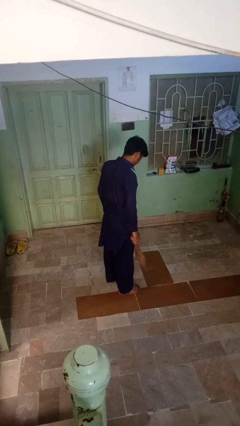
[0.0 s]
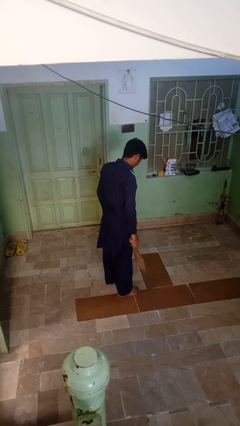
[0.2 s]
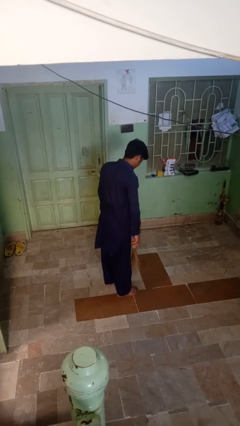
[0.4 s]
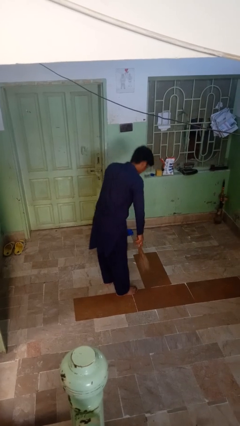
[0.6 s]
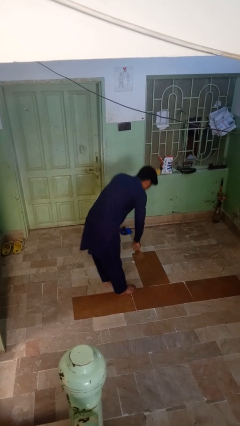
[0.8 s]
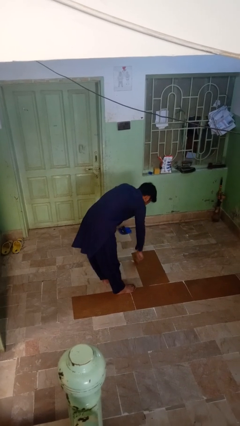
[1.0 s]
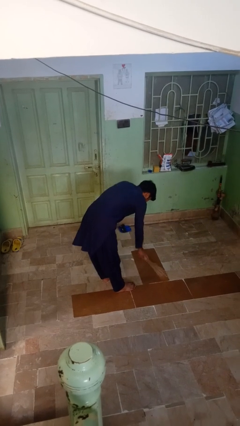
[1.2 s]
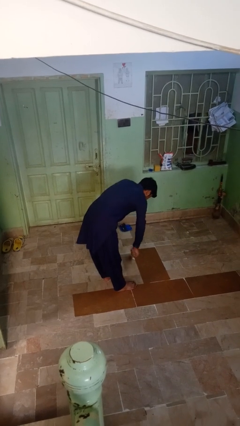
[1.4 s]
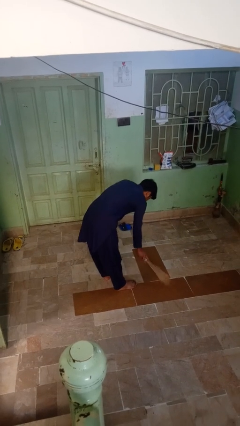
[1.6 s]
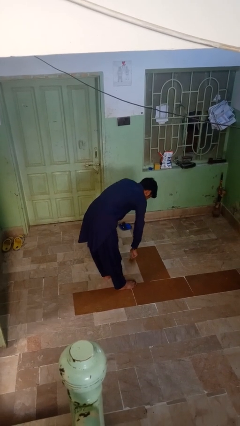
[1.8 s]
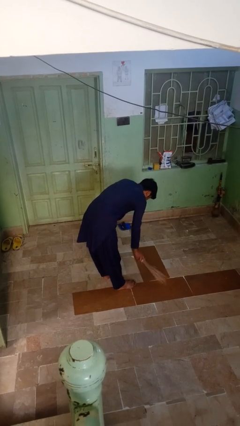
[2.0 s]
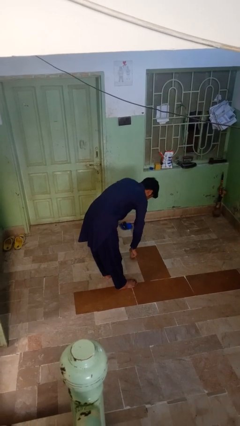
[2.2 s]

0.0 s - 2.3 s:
person sweeps floor

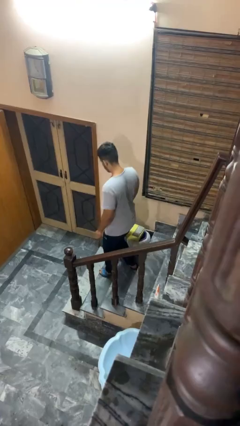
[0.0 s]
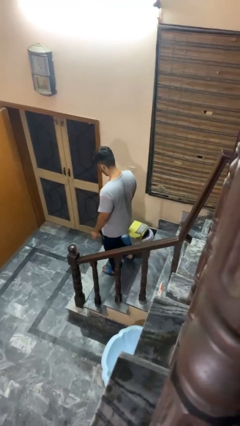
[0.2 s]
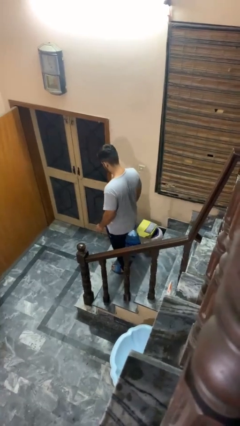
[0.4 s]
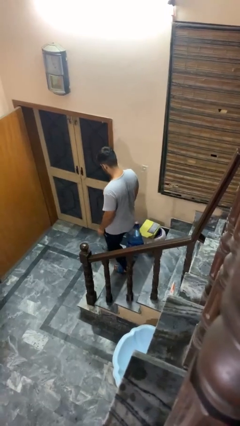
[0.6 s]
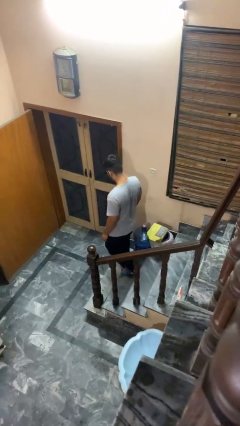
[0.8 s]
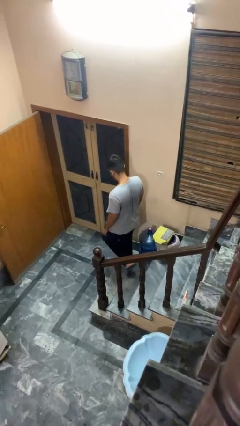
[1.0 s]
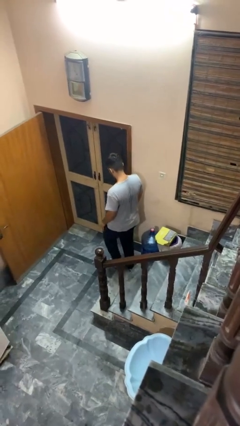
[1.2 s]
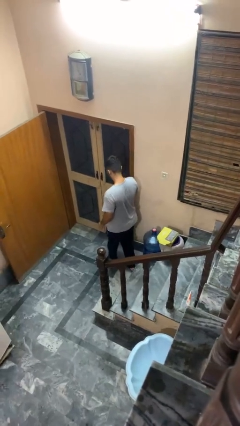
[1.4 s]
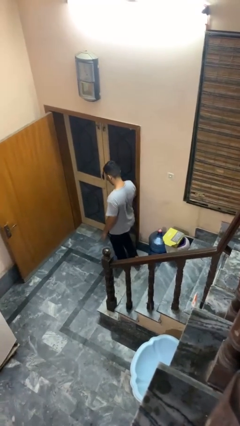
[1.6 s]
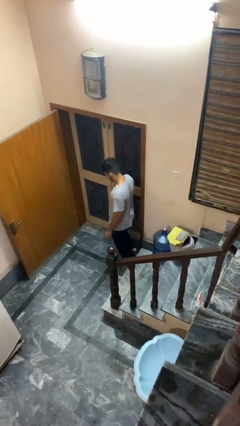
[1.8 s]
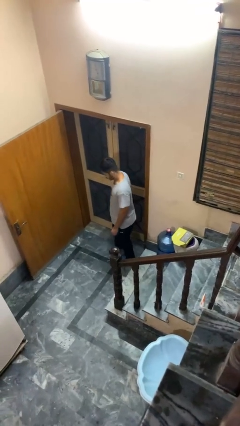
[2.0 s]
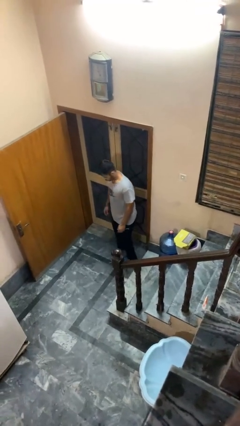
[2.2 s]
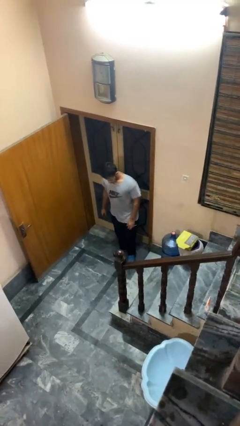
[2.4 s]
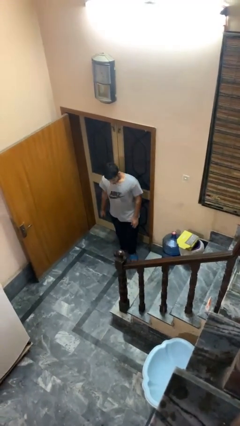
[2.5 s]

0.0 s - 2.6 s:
person climbs down stairs

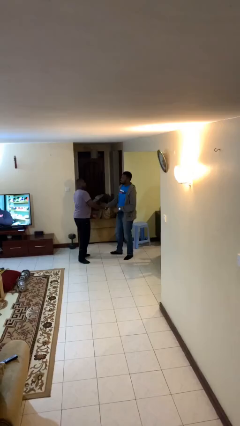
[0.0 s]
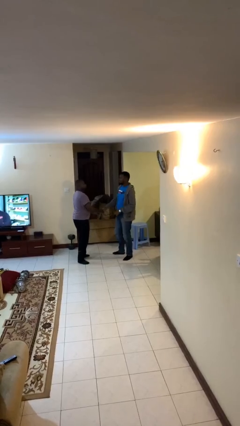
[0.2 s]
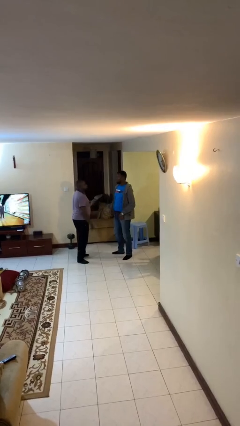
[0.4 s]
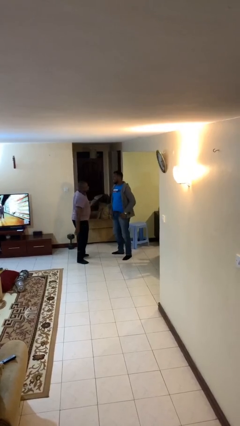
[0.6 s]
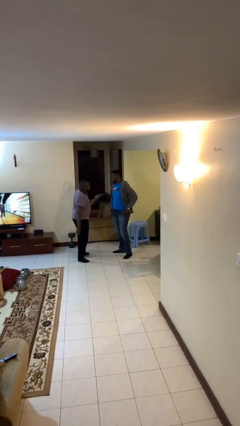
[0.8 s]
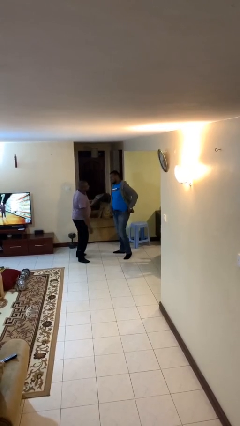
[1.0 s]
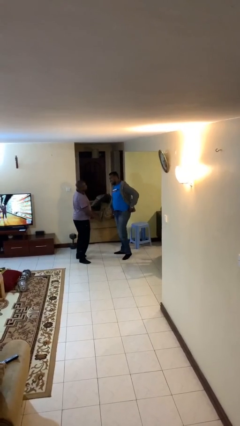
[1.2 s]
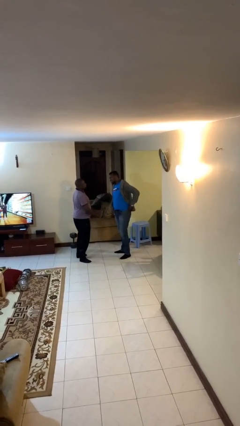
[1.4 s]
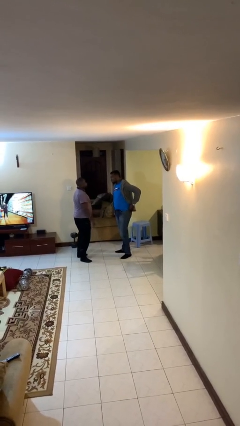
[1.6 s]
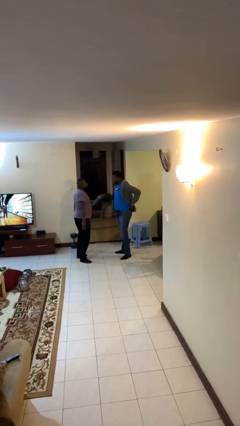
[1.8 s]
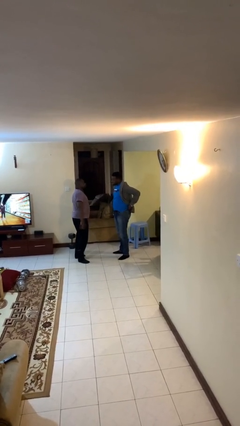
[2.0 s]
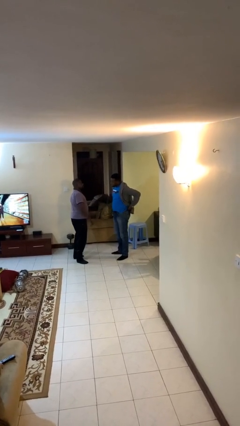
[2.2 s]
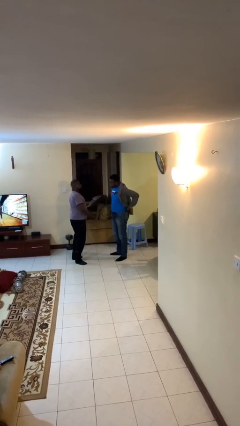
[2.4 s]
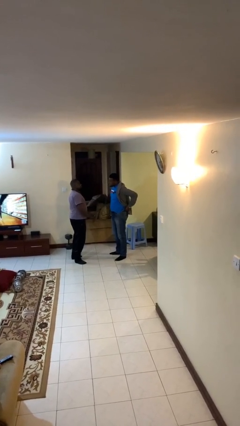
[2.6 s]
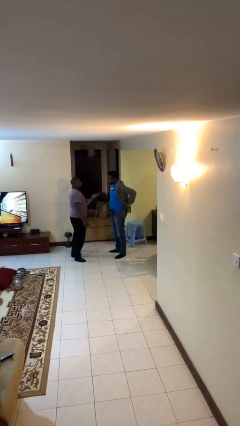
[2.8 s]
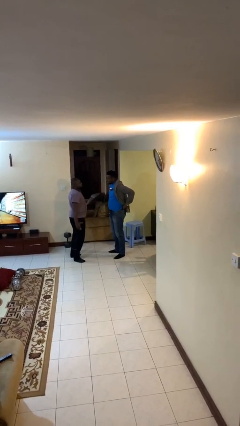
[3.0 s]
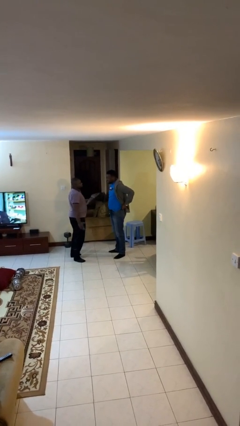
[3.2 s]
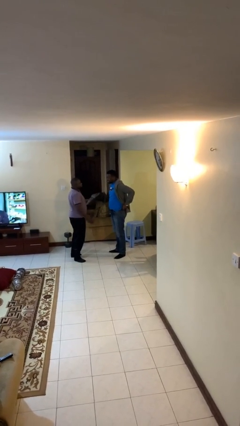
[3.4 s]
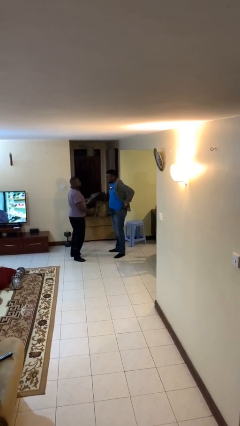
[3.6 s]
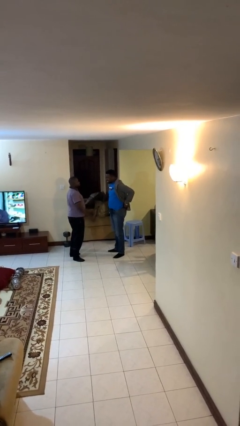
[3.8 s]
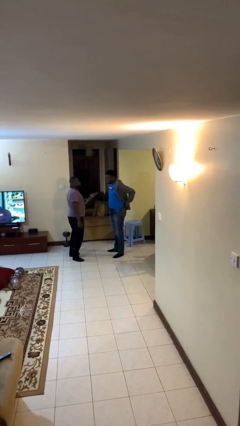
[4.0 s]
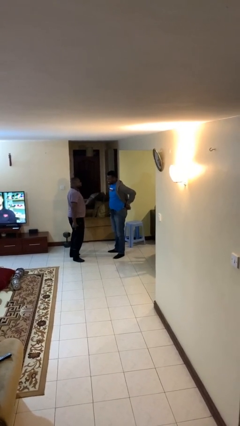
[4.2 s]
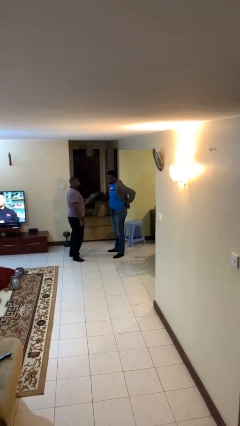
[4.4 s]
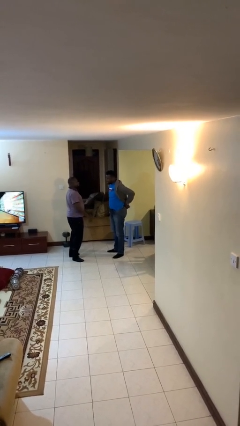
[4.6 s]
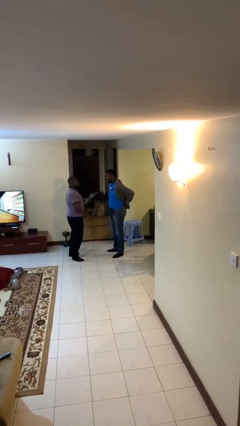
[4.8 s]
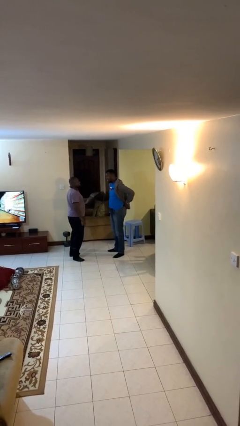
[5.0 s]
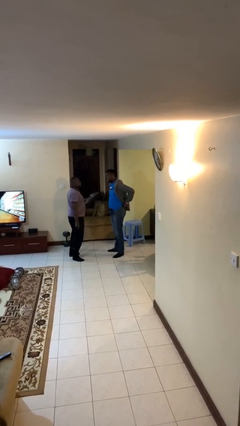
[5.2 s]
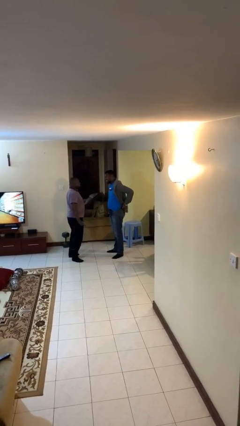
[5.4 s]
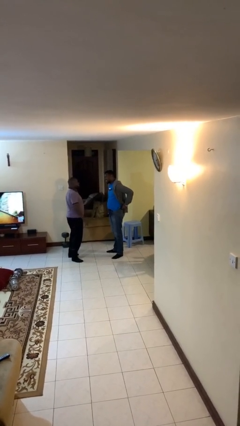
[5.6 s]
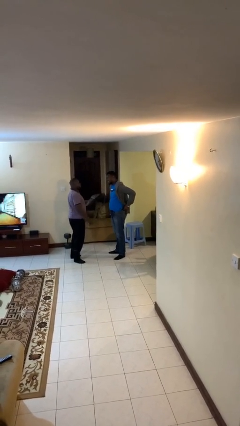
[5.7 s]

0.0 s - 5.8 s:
person talks to person

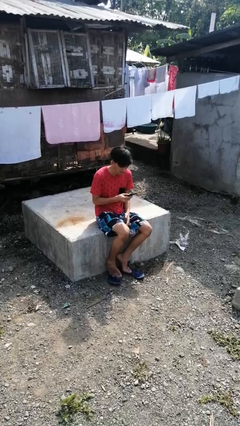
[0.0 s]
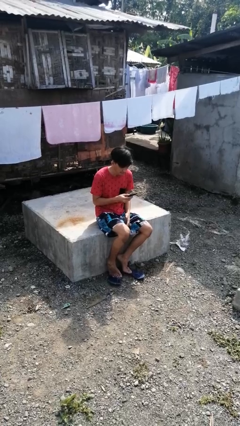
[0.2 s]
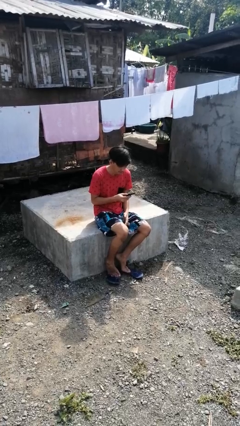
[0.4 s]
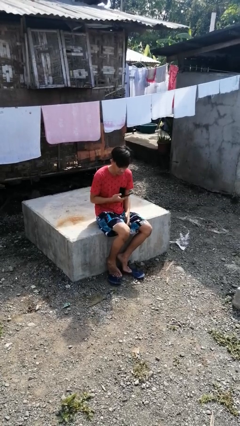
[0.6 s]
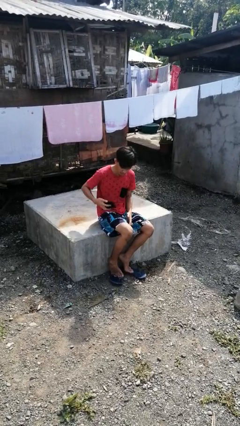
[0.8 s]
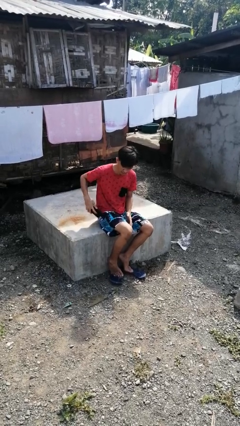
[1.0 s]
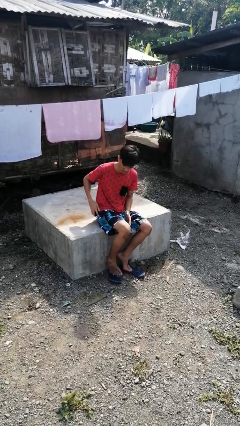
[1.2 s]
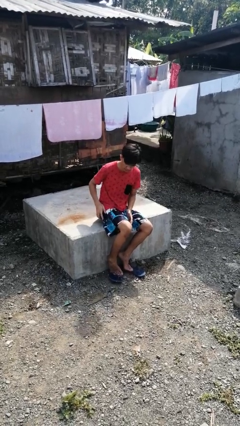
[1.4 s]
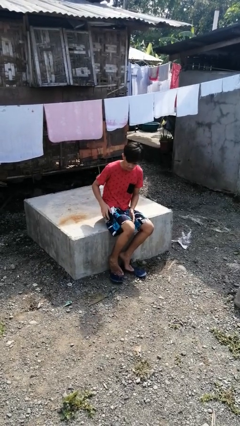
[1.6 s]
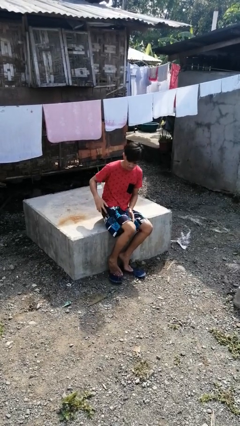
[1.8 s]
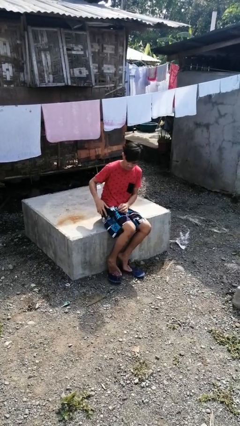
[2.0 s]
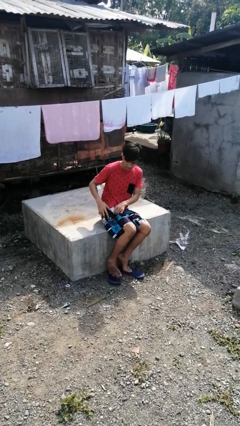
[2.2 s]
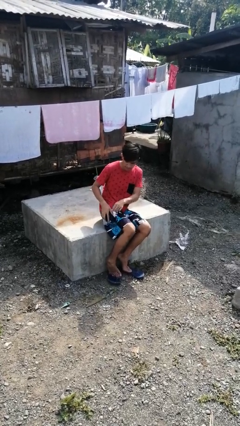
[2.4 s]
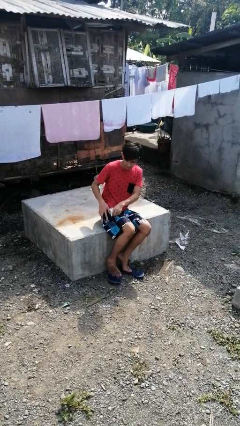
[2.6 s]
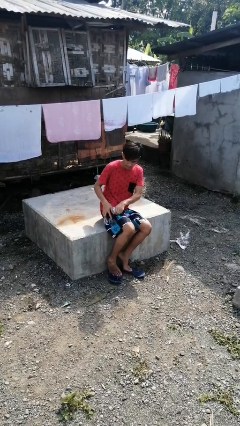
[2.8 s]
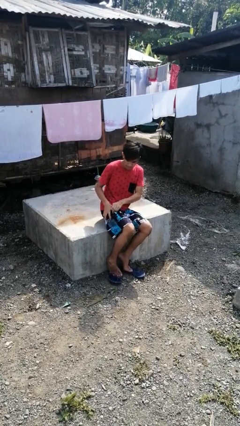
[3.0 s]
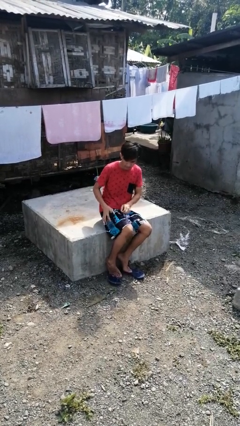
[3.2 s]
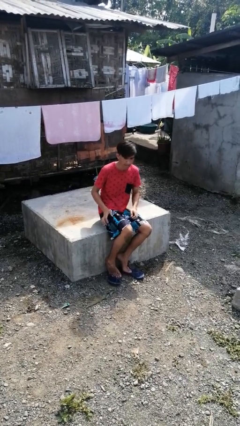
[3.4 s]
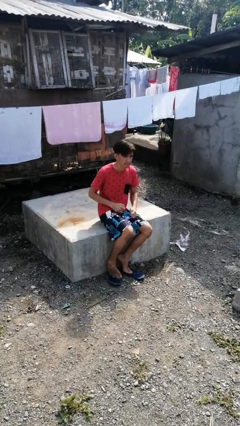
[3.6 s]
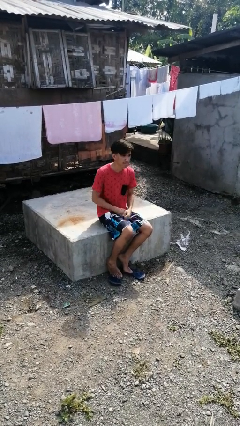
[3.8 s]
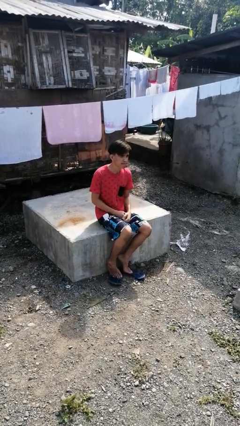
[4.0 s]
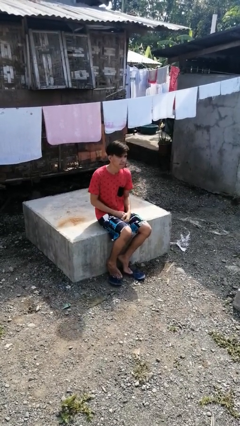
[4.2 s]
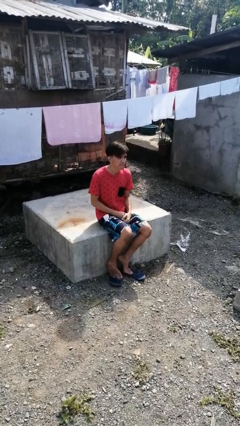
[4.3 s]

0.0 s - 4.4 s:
person puts phone into pocket

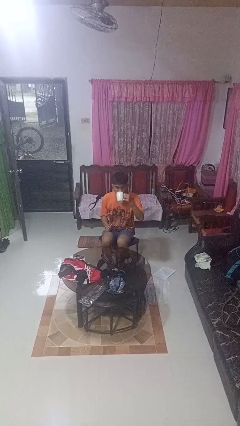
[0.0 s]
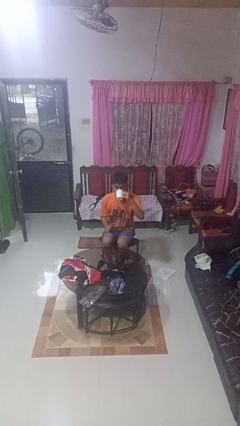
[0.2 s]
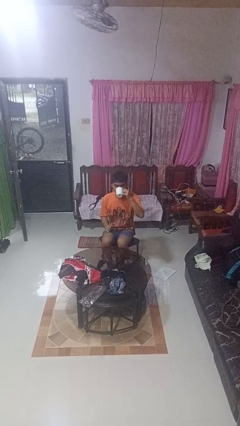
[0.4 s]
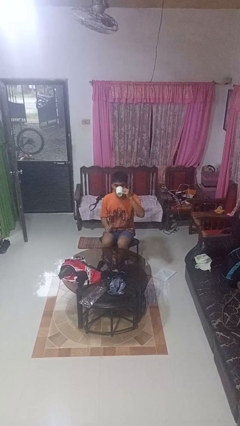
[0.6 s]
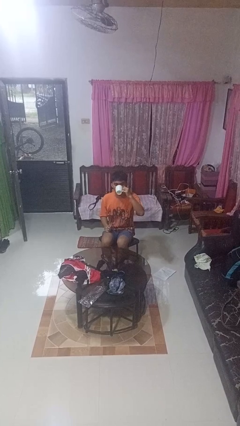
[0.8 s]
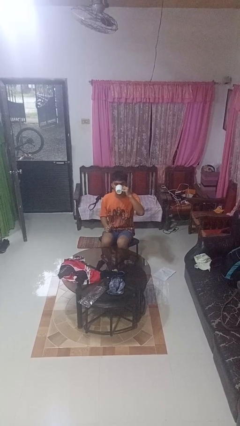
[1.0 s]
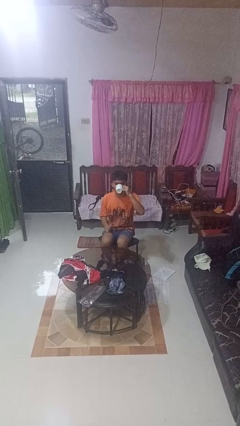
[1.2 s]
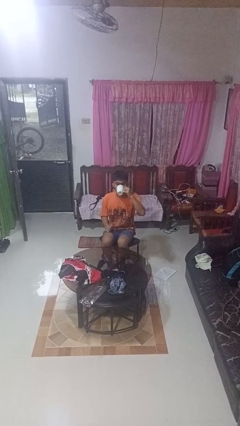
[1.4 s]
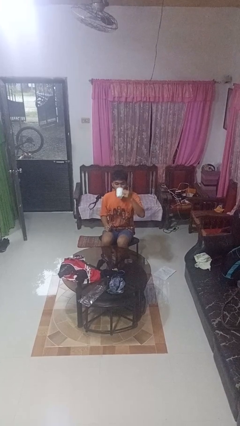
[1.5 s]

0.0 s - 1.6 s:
person drinks from mug

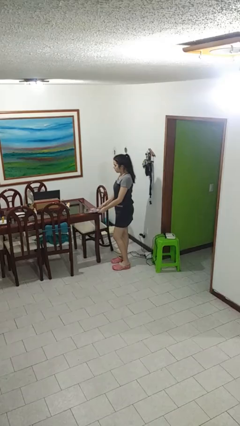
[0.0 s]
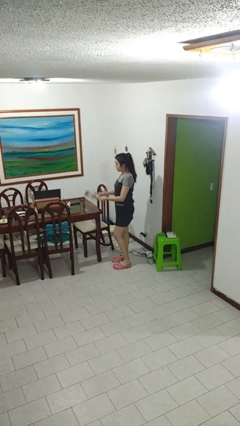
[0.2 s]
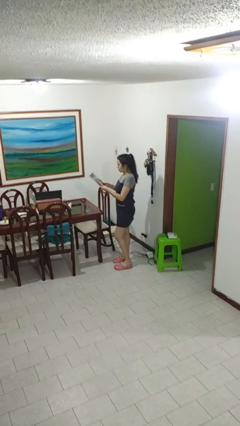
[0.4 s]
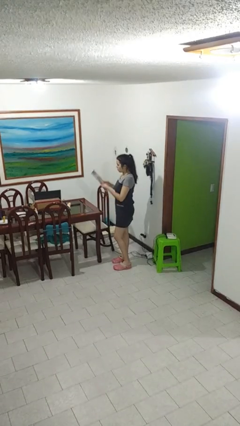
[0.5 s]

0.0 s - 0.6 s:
person picks up object from table

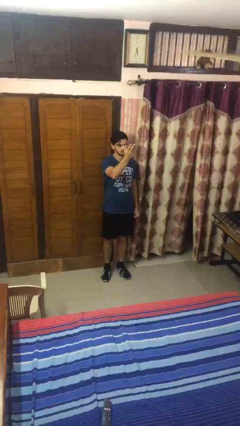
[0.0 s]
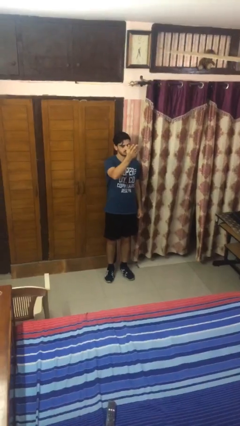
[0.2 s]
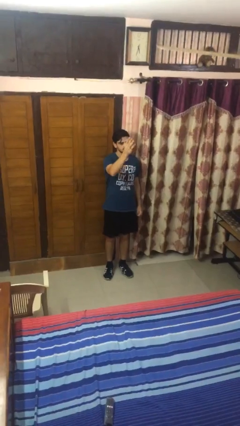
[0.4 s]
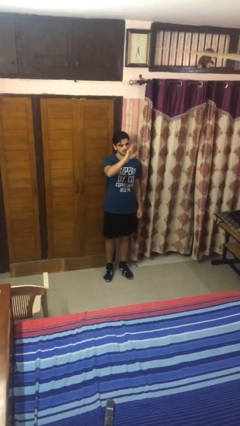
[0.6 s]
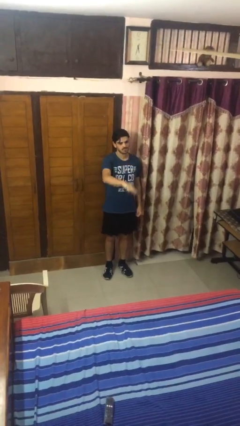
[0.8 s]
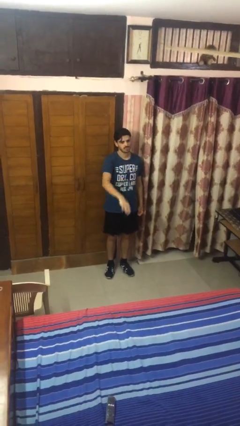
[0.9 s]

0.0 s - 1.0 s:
person gestures swipe down
